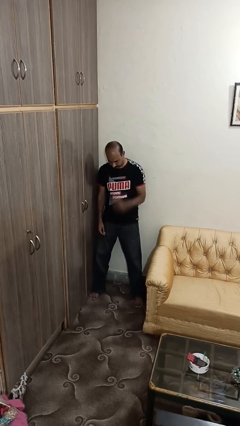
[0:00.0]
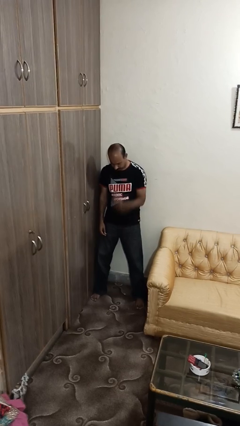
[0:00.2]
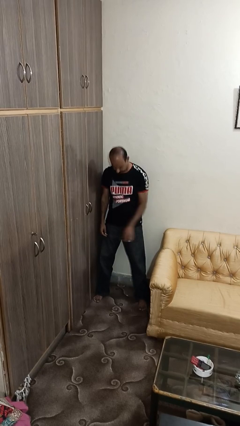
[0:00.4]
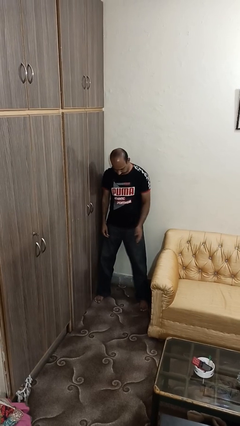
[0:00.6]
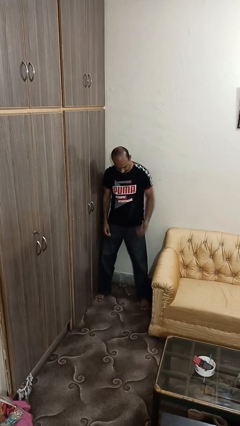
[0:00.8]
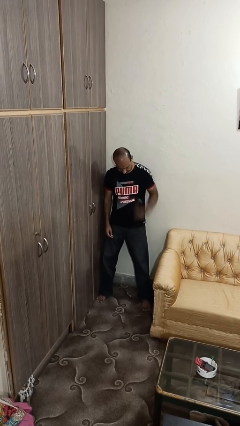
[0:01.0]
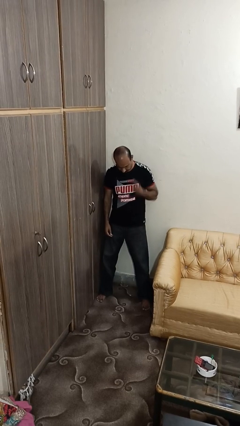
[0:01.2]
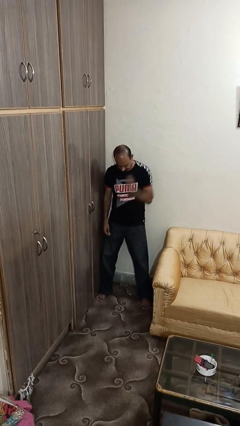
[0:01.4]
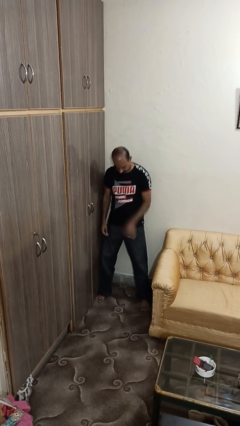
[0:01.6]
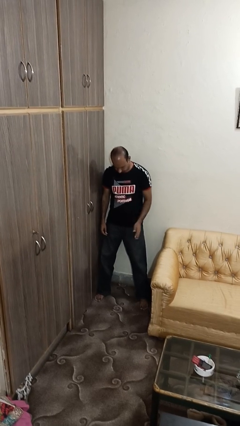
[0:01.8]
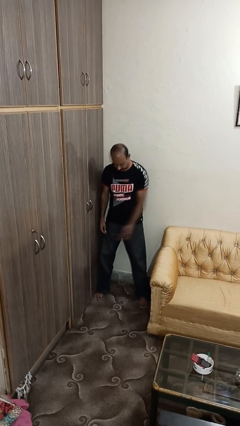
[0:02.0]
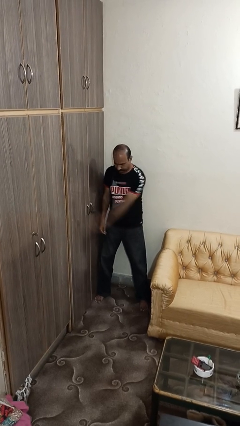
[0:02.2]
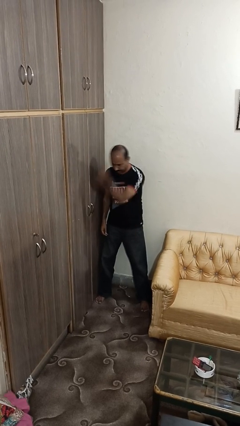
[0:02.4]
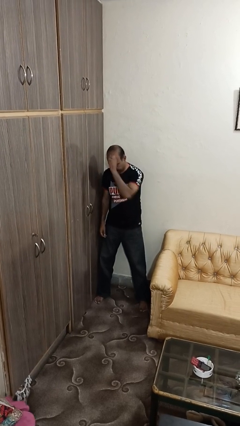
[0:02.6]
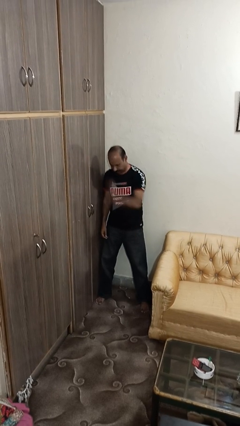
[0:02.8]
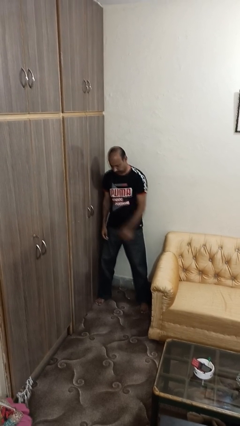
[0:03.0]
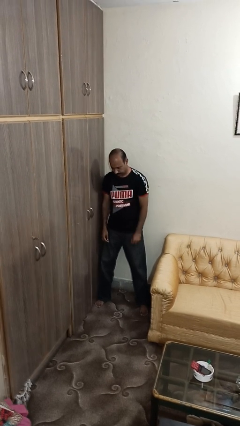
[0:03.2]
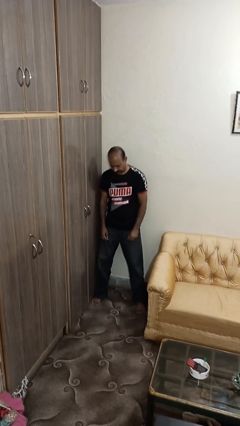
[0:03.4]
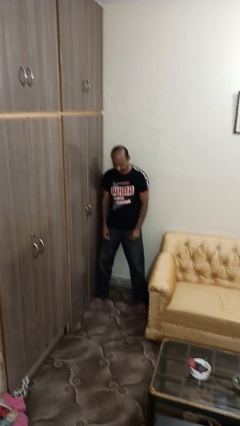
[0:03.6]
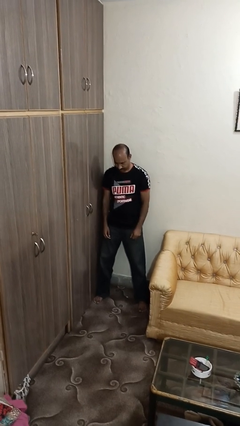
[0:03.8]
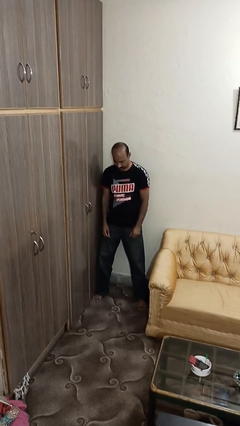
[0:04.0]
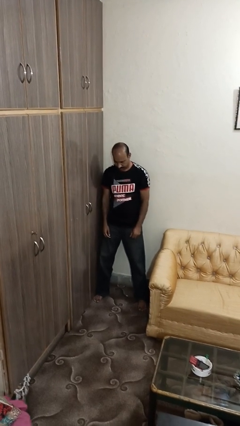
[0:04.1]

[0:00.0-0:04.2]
person bounces ball on floor

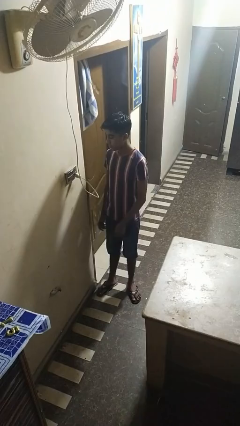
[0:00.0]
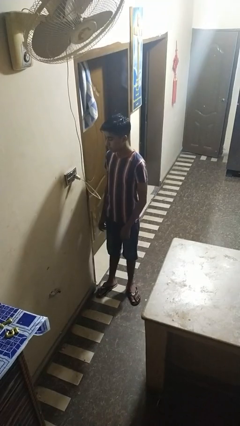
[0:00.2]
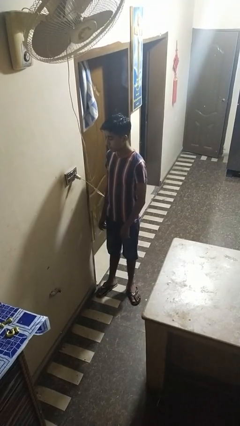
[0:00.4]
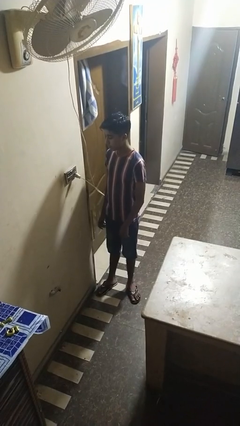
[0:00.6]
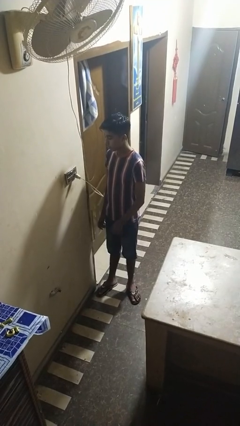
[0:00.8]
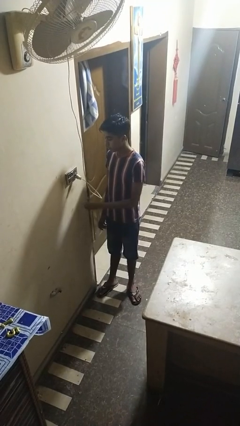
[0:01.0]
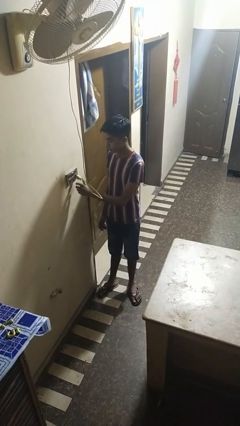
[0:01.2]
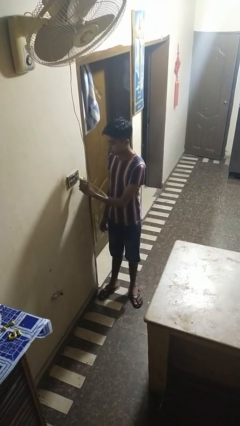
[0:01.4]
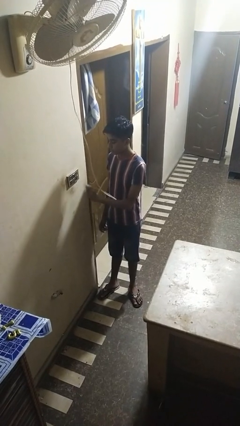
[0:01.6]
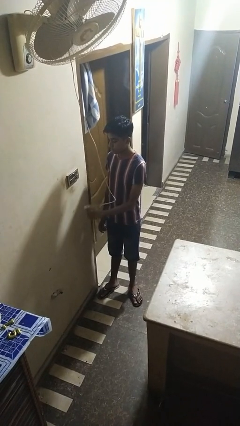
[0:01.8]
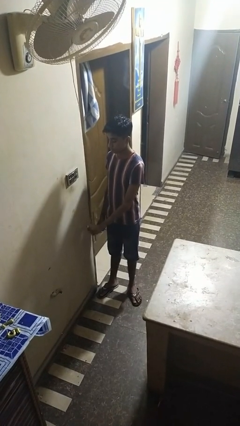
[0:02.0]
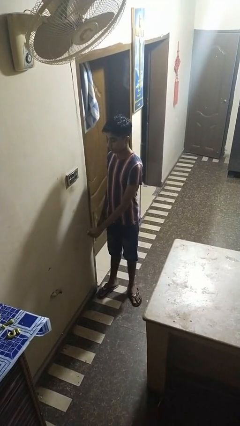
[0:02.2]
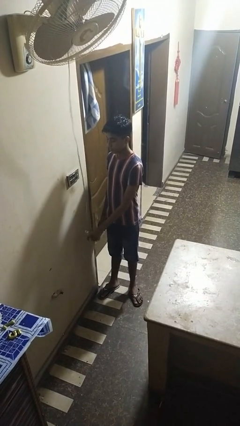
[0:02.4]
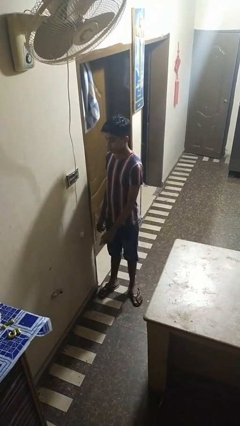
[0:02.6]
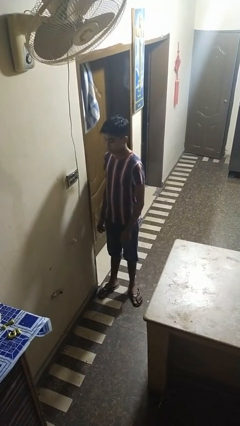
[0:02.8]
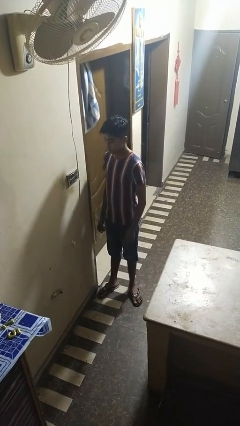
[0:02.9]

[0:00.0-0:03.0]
person unplugs from electrical socket

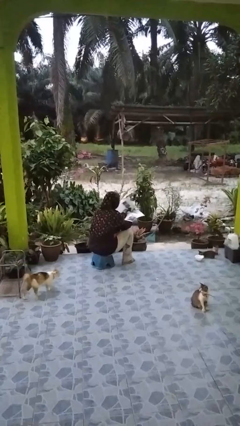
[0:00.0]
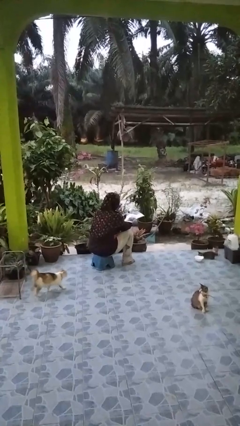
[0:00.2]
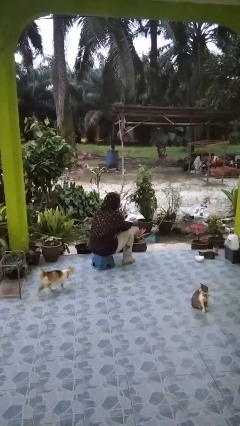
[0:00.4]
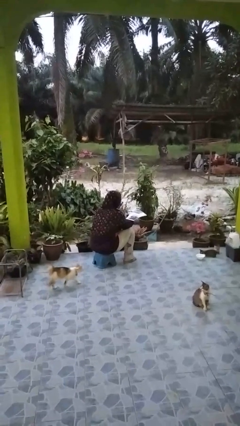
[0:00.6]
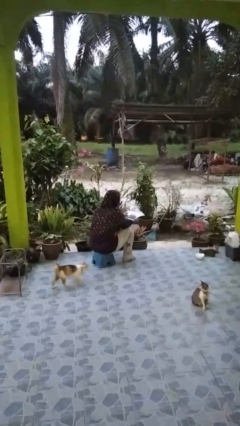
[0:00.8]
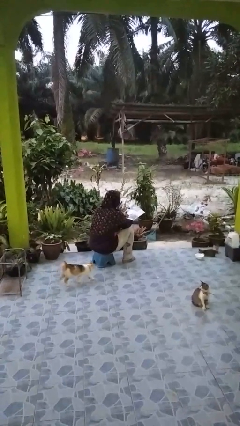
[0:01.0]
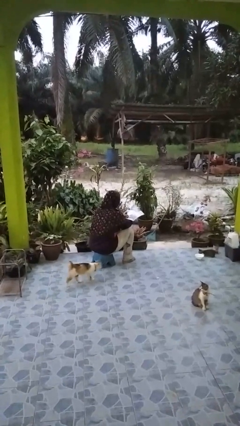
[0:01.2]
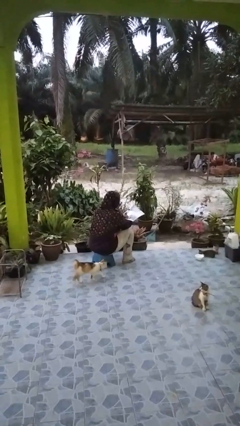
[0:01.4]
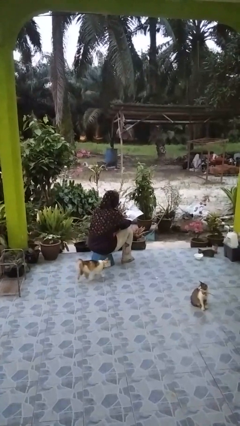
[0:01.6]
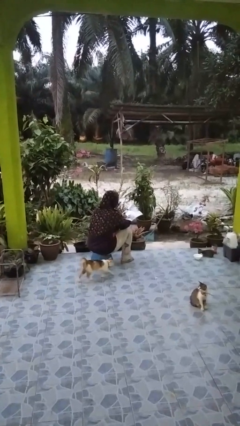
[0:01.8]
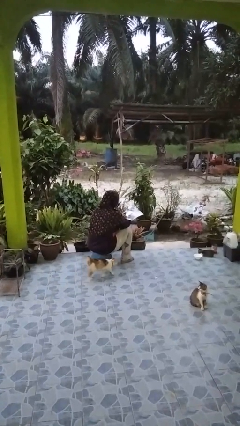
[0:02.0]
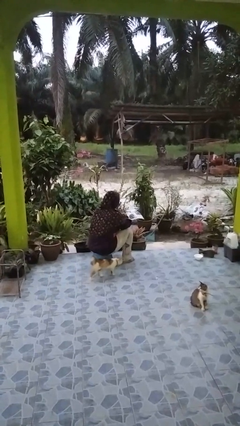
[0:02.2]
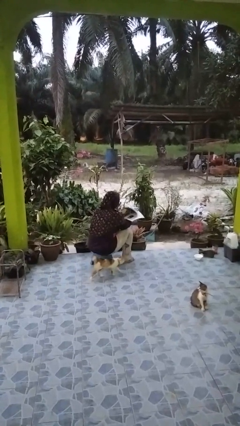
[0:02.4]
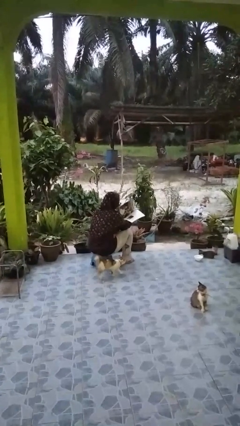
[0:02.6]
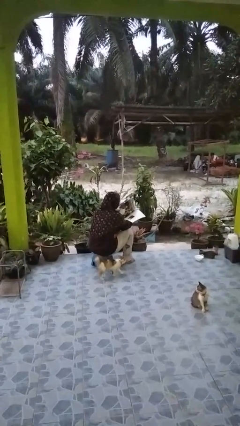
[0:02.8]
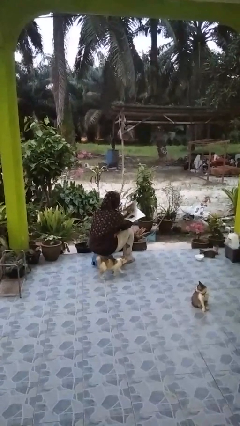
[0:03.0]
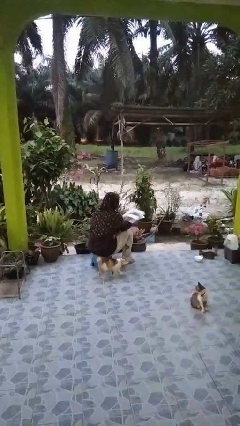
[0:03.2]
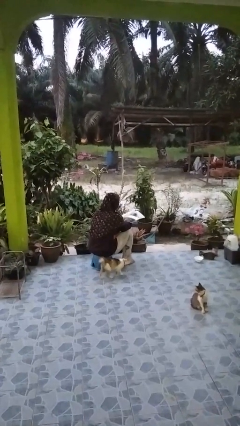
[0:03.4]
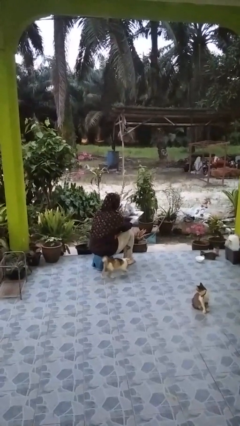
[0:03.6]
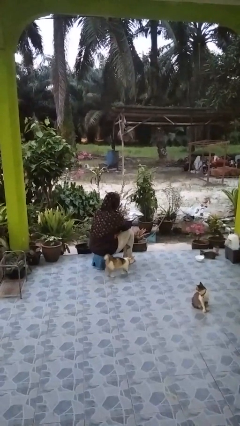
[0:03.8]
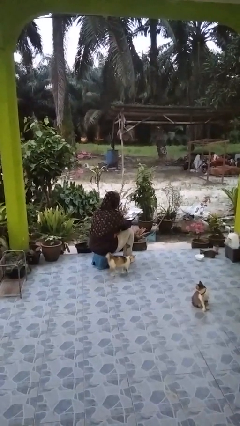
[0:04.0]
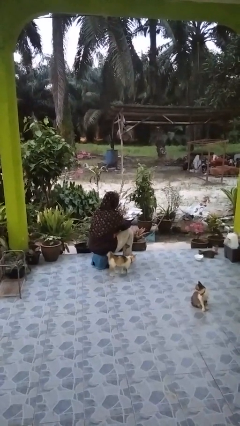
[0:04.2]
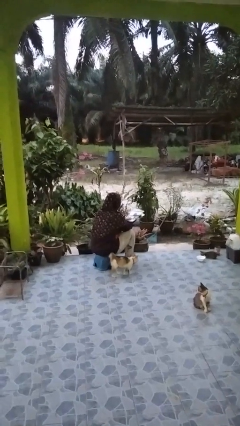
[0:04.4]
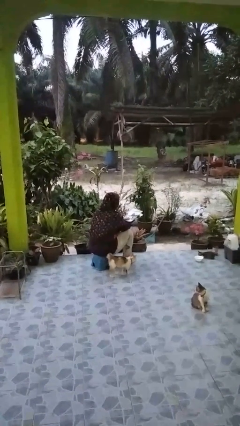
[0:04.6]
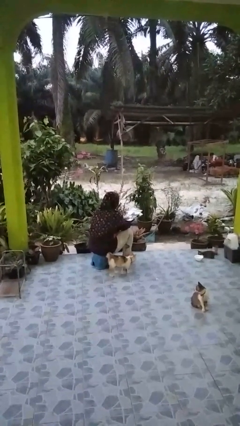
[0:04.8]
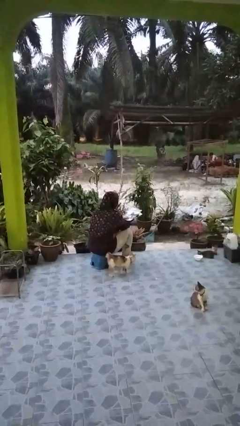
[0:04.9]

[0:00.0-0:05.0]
person reads magazine

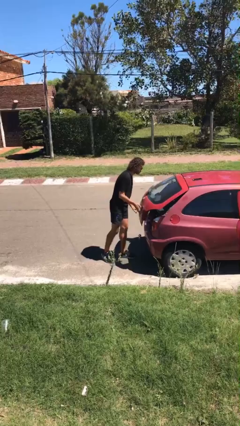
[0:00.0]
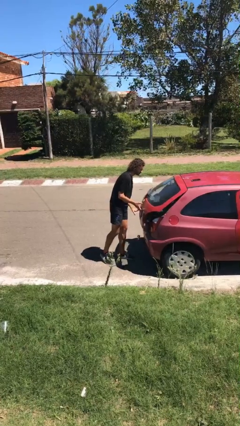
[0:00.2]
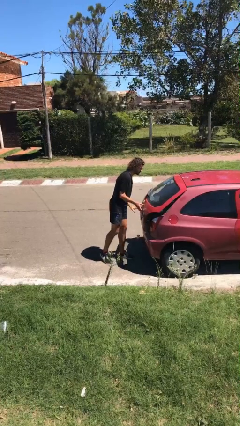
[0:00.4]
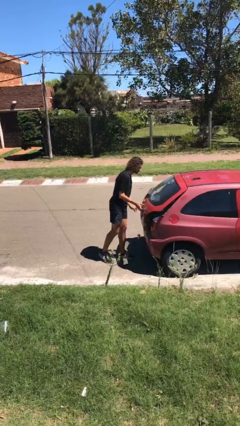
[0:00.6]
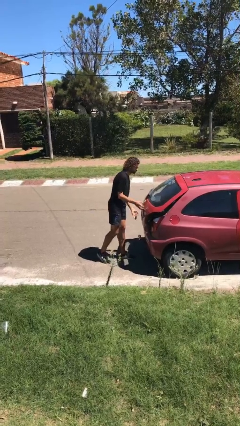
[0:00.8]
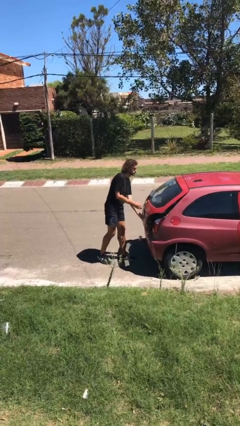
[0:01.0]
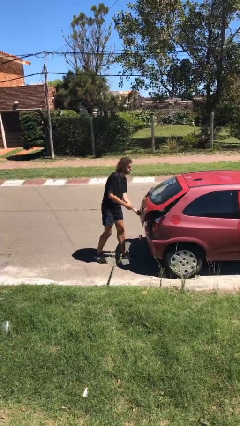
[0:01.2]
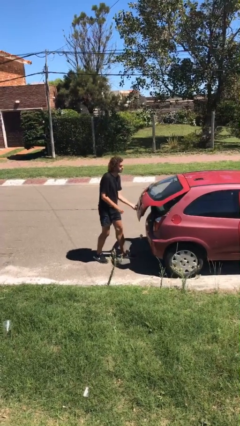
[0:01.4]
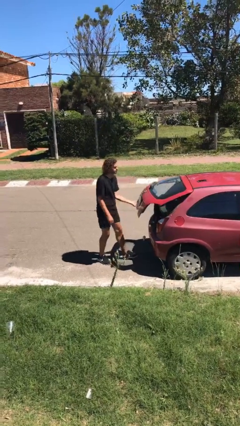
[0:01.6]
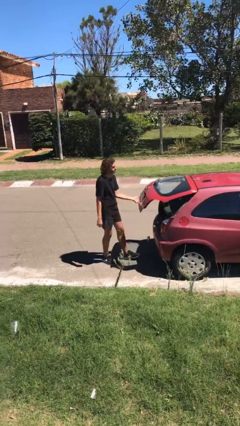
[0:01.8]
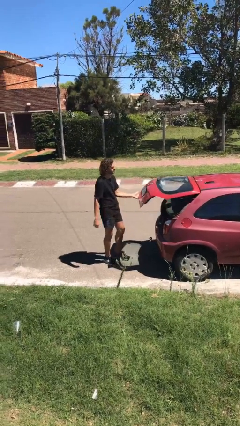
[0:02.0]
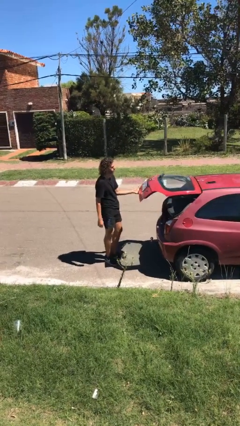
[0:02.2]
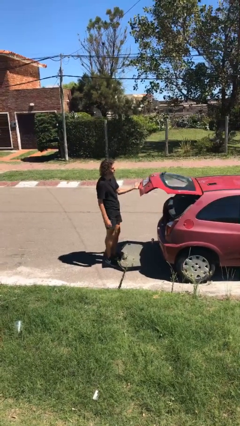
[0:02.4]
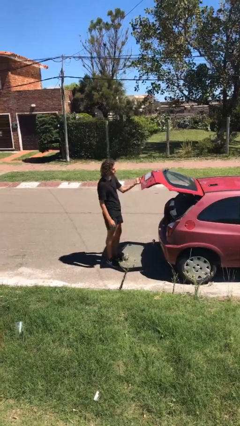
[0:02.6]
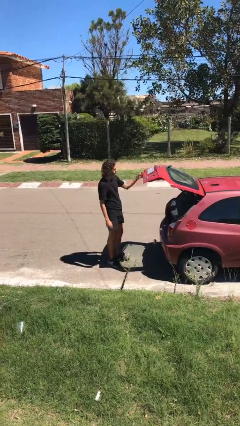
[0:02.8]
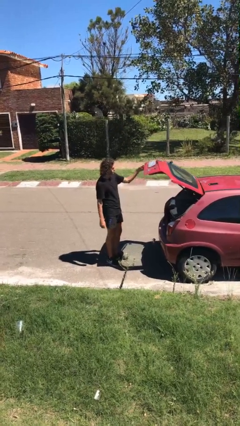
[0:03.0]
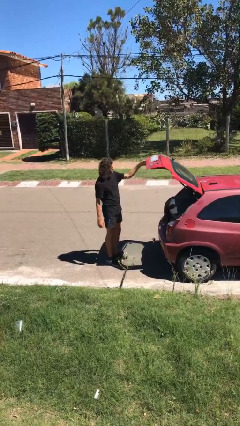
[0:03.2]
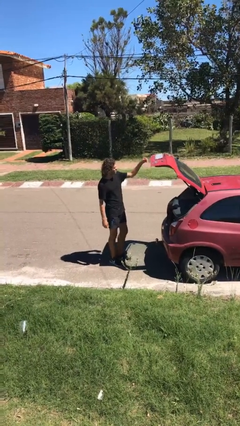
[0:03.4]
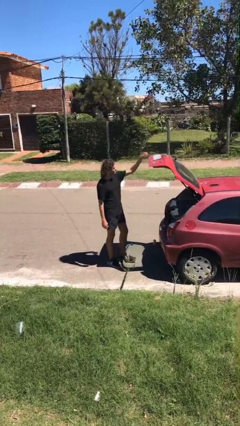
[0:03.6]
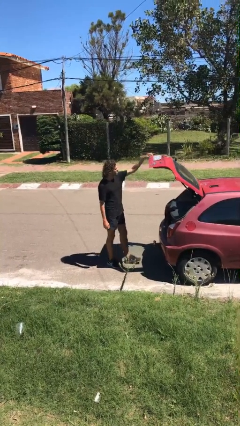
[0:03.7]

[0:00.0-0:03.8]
person opens car trunk

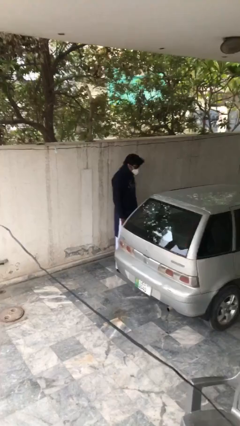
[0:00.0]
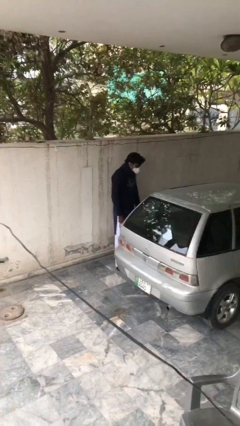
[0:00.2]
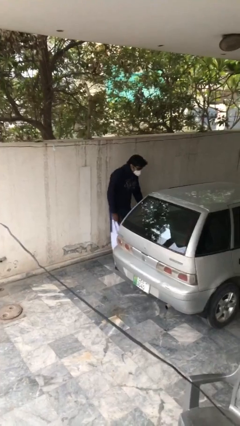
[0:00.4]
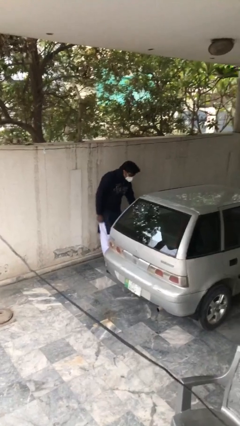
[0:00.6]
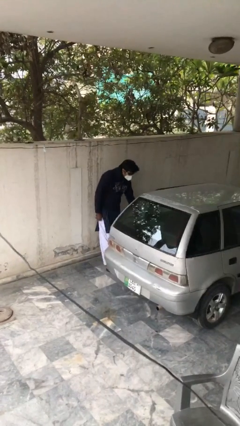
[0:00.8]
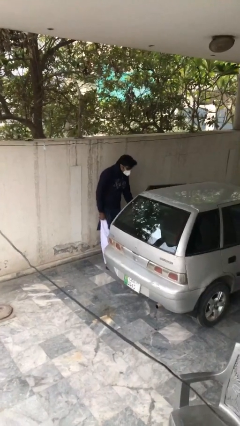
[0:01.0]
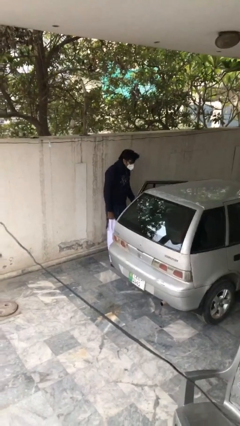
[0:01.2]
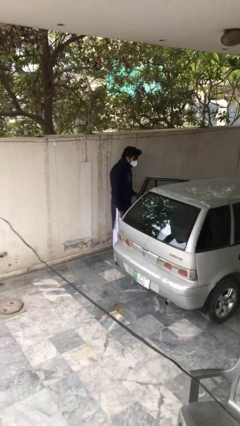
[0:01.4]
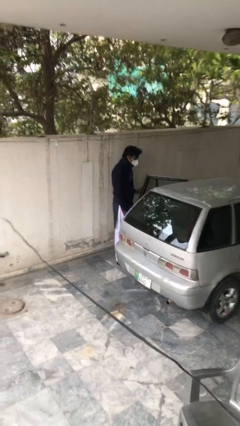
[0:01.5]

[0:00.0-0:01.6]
person opens car door
